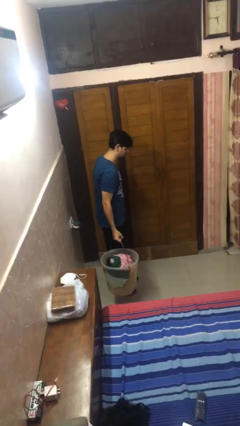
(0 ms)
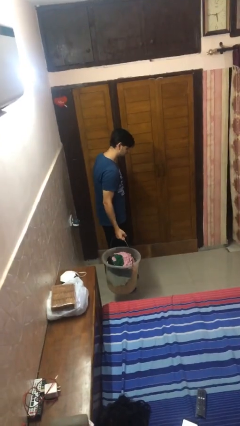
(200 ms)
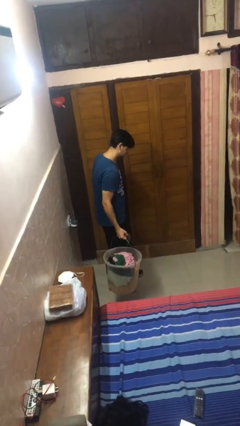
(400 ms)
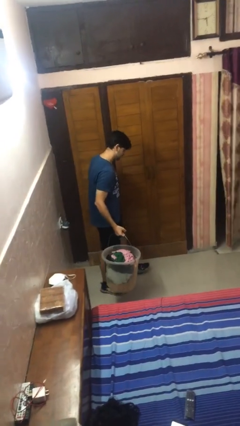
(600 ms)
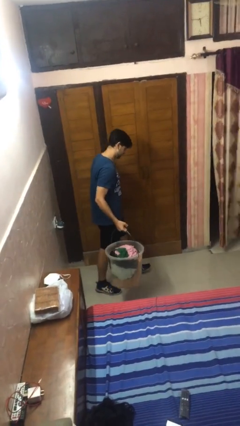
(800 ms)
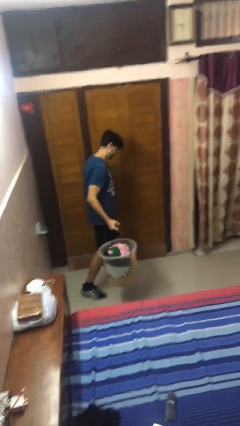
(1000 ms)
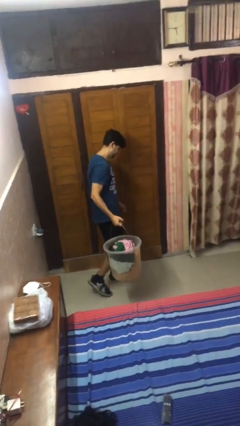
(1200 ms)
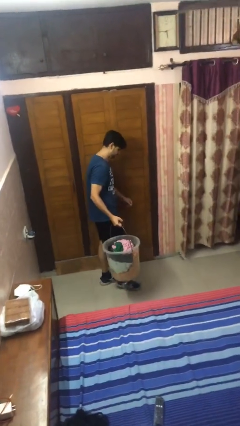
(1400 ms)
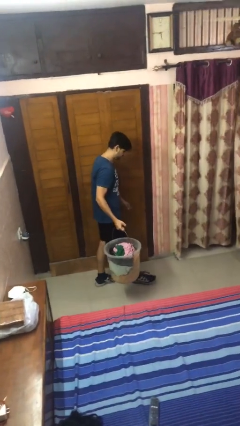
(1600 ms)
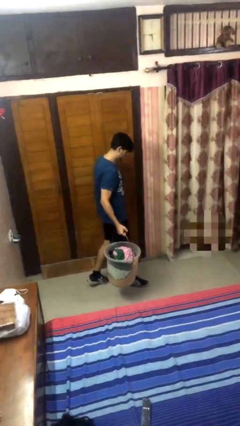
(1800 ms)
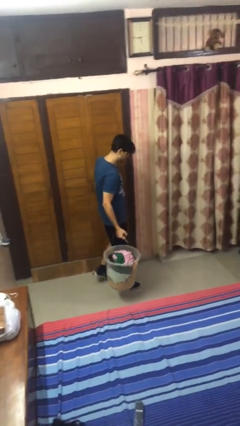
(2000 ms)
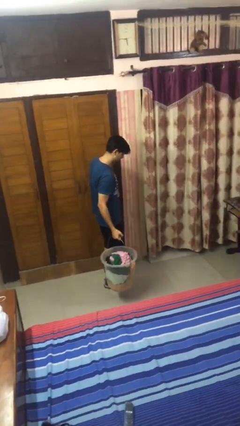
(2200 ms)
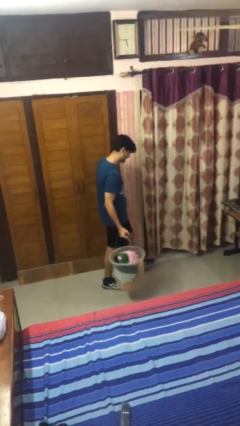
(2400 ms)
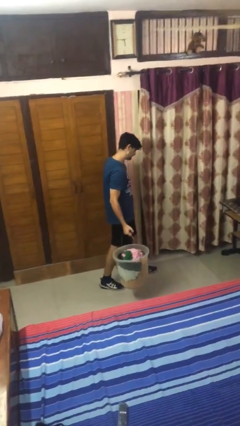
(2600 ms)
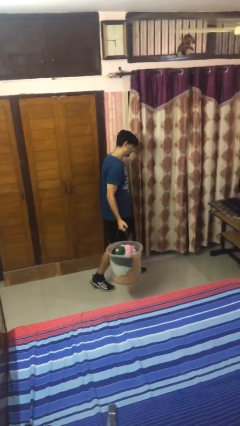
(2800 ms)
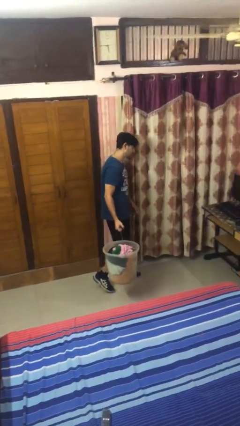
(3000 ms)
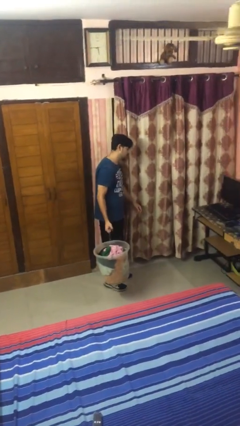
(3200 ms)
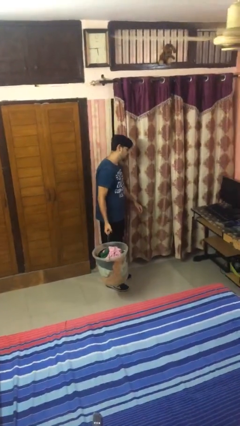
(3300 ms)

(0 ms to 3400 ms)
person carries laundry basket

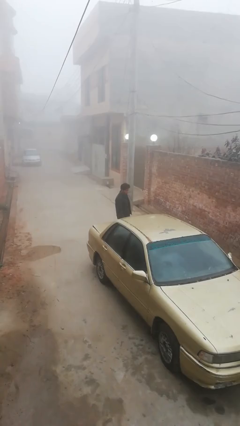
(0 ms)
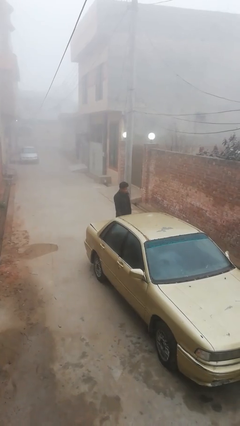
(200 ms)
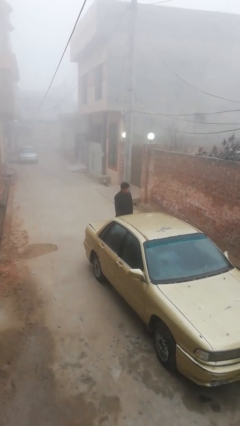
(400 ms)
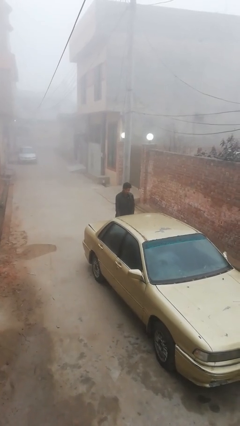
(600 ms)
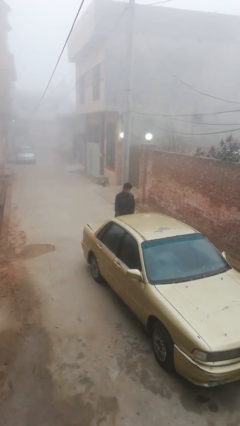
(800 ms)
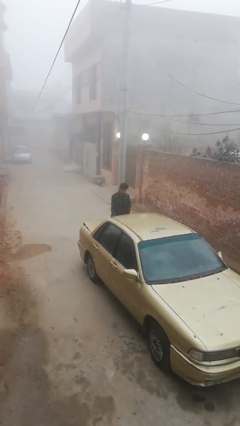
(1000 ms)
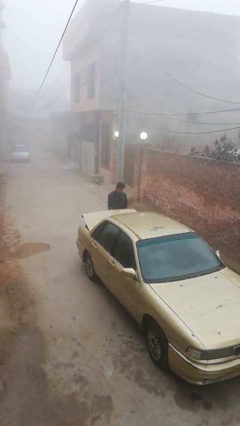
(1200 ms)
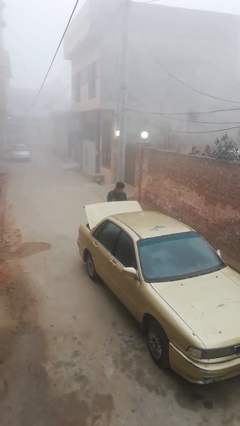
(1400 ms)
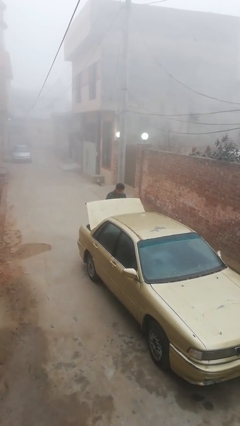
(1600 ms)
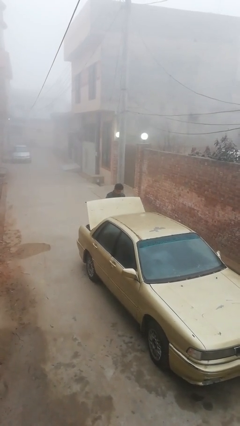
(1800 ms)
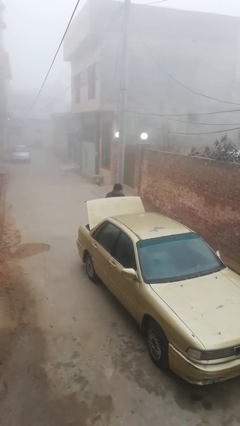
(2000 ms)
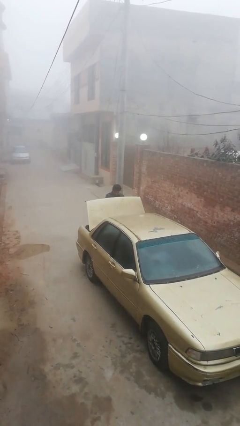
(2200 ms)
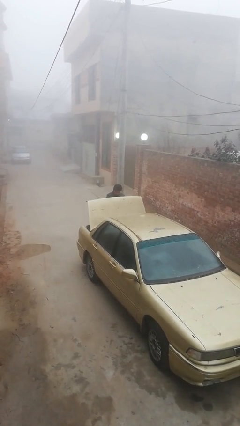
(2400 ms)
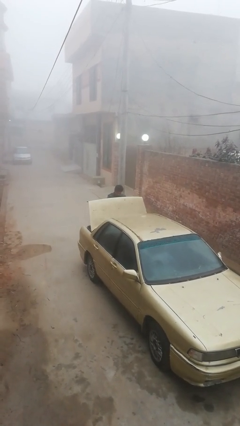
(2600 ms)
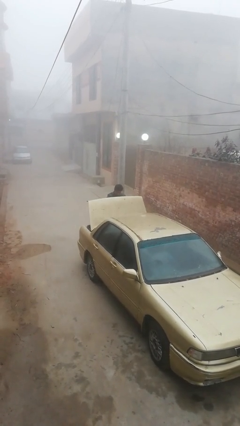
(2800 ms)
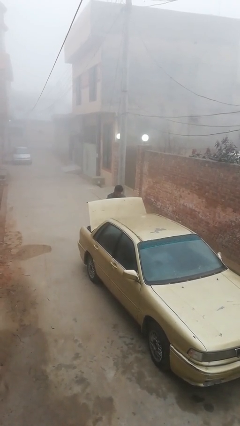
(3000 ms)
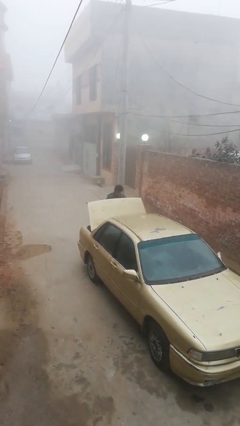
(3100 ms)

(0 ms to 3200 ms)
person opens car trunk

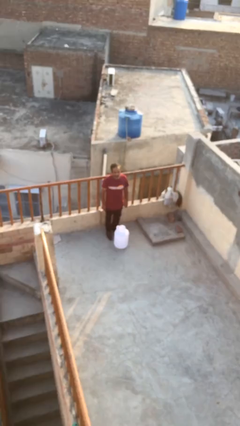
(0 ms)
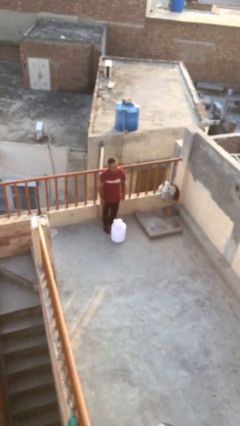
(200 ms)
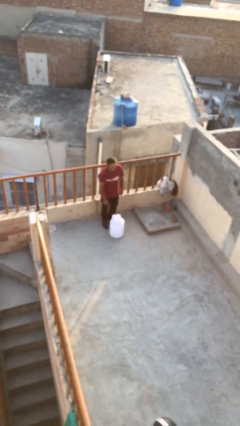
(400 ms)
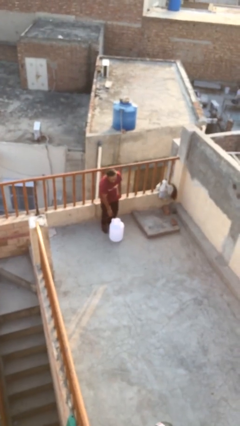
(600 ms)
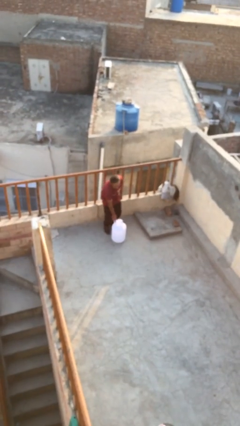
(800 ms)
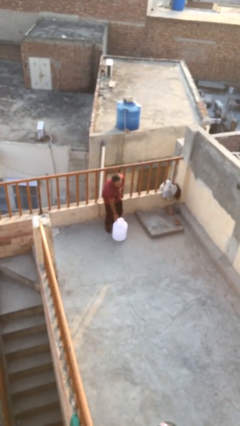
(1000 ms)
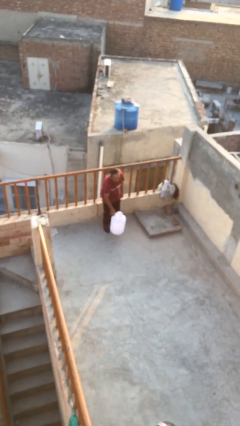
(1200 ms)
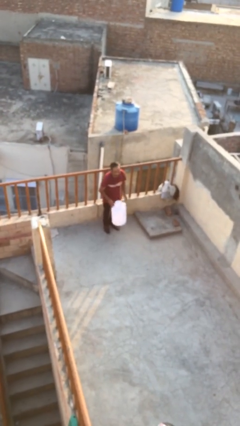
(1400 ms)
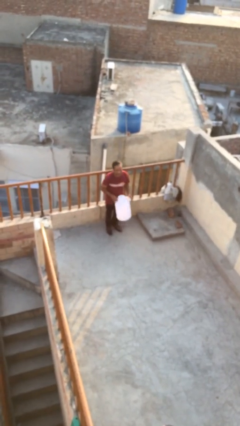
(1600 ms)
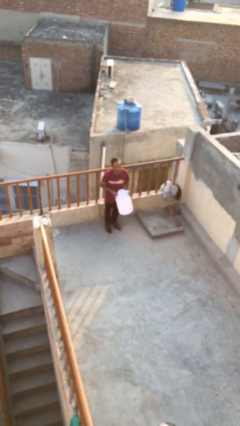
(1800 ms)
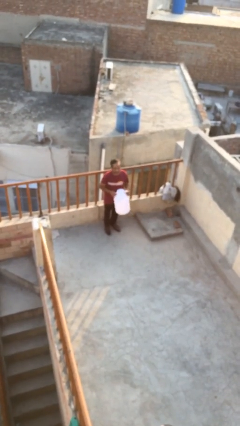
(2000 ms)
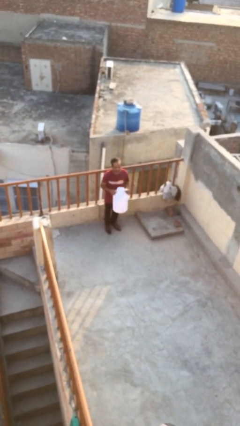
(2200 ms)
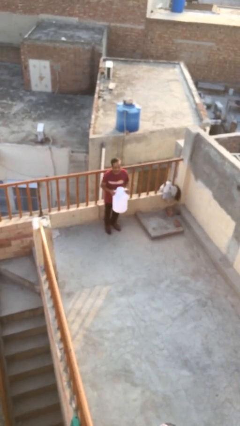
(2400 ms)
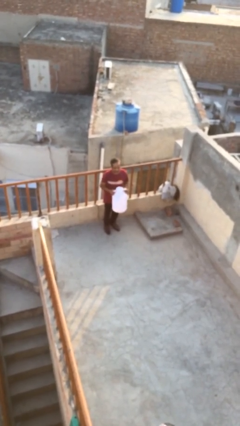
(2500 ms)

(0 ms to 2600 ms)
person picks up object from floor

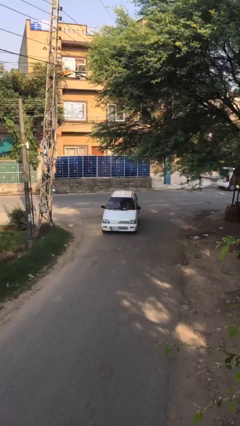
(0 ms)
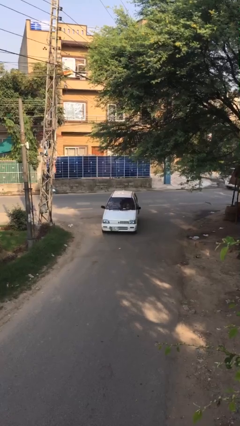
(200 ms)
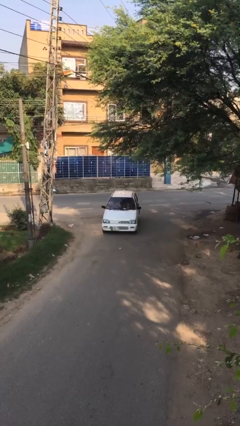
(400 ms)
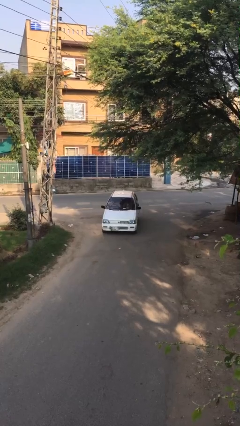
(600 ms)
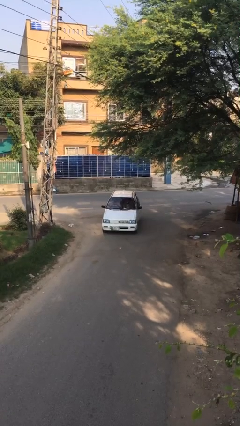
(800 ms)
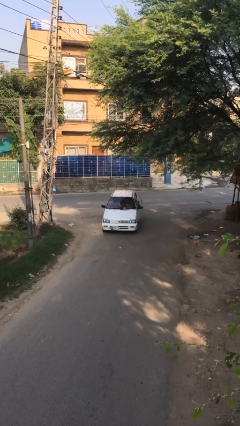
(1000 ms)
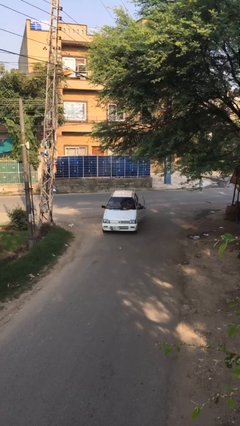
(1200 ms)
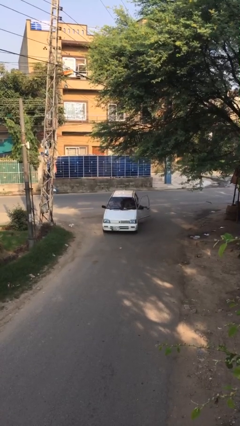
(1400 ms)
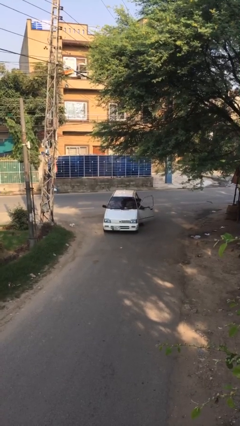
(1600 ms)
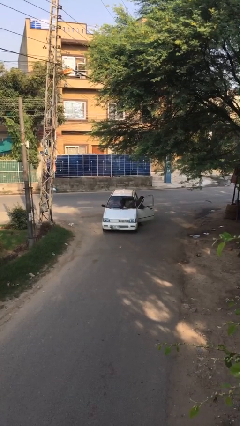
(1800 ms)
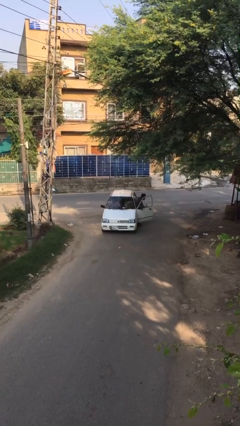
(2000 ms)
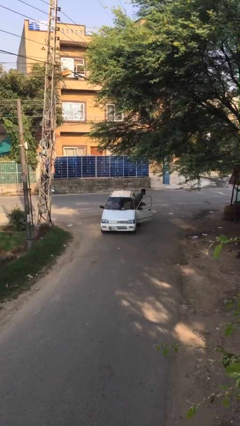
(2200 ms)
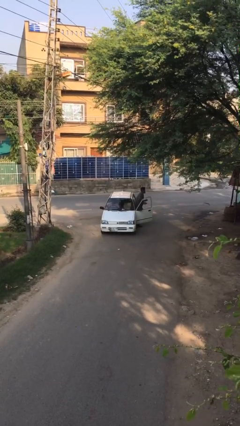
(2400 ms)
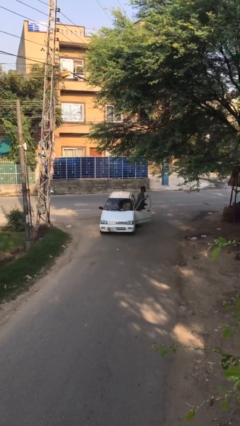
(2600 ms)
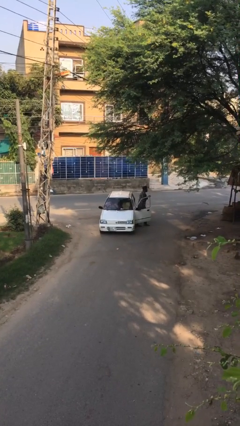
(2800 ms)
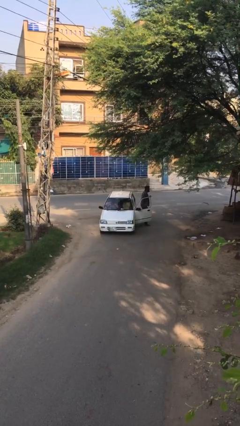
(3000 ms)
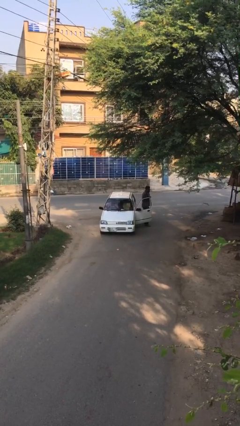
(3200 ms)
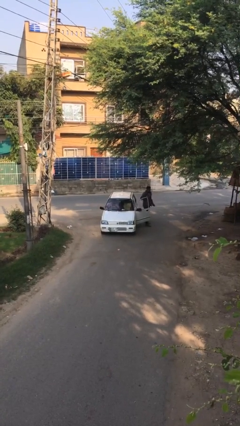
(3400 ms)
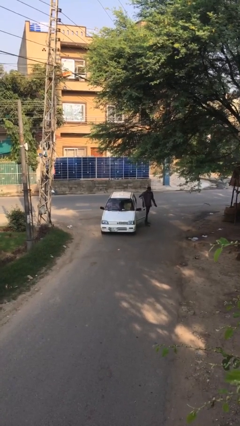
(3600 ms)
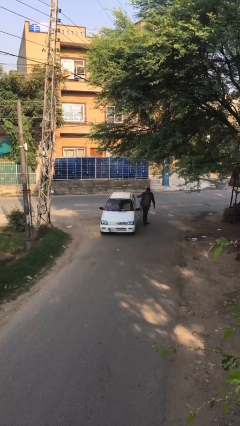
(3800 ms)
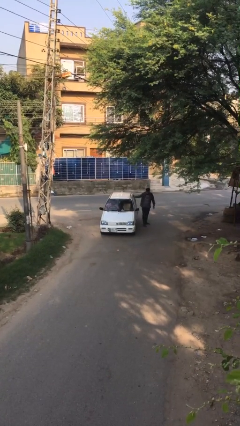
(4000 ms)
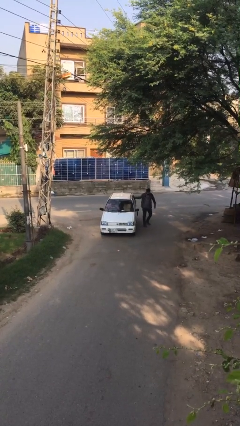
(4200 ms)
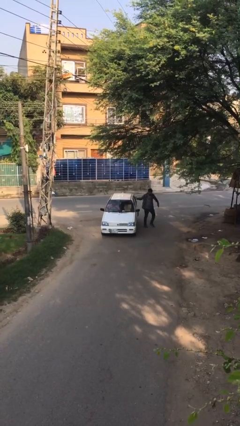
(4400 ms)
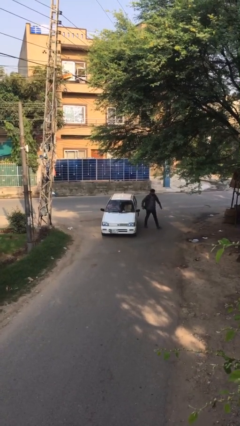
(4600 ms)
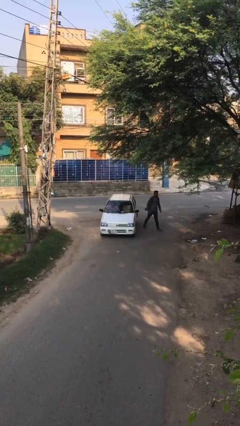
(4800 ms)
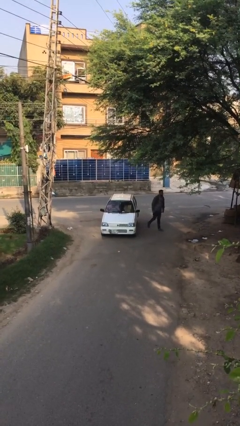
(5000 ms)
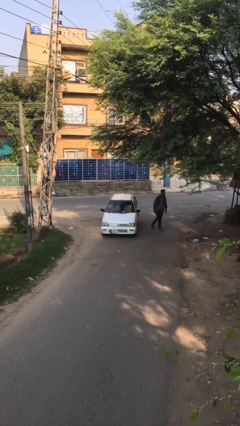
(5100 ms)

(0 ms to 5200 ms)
car drops off person

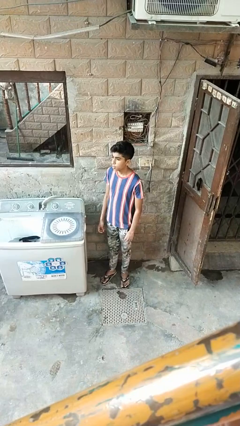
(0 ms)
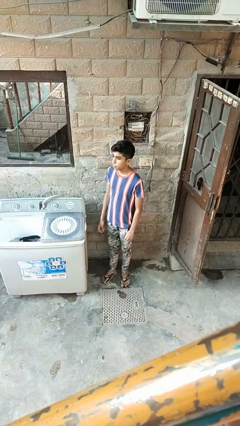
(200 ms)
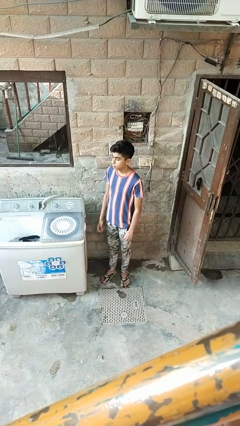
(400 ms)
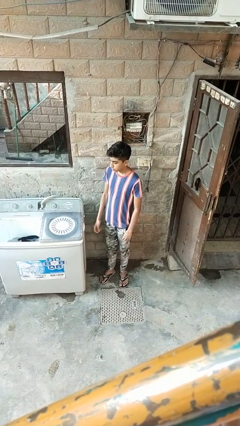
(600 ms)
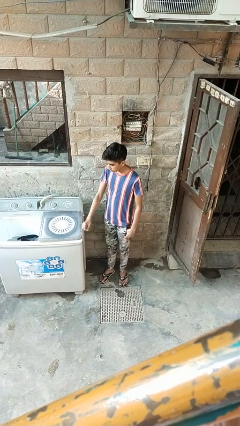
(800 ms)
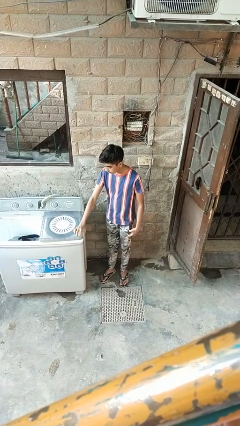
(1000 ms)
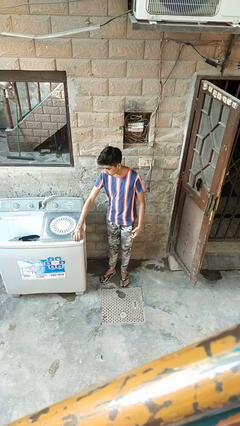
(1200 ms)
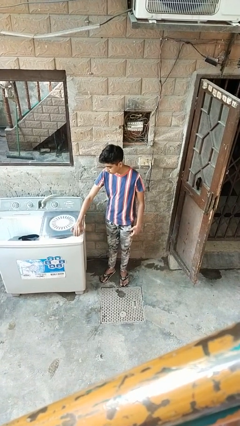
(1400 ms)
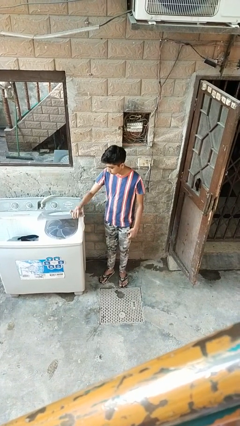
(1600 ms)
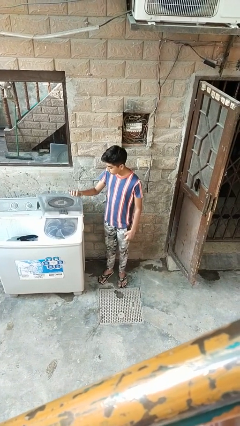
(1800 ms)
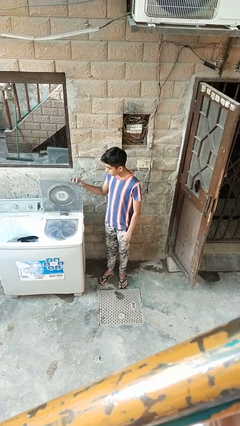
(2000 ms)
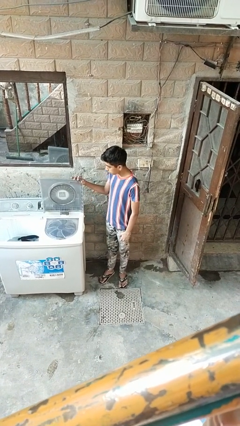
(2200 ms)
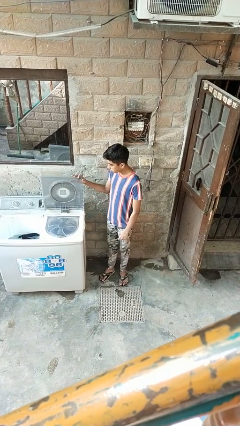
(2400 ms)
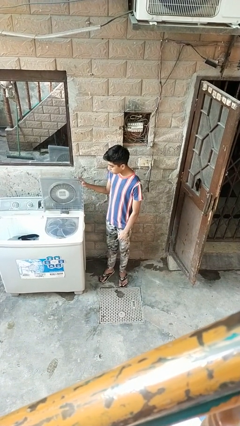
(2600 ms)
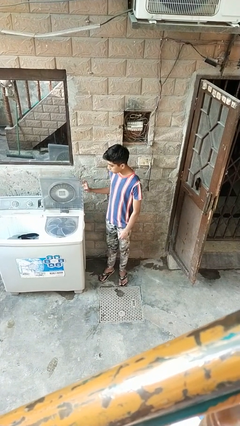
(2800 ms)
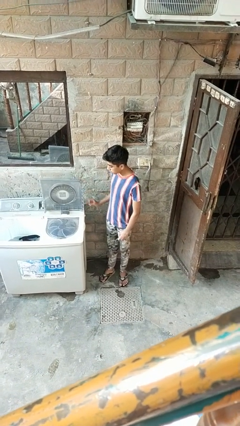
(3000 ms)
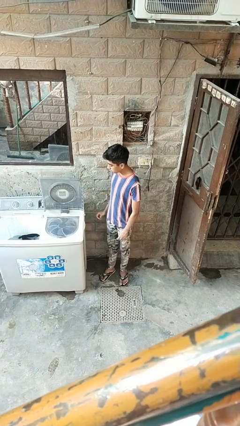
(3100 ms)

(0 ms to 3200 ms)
person opens clothes washer

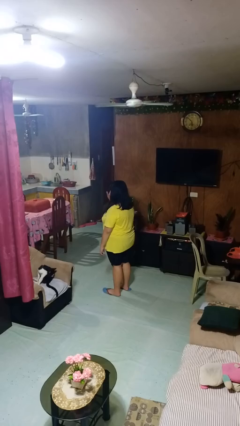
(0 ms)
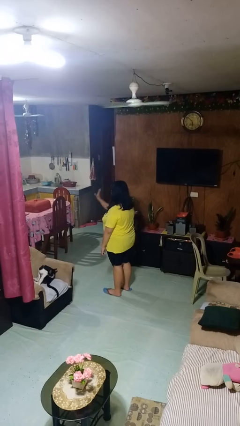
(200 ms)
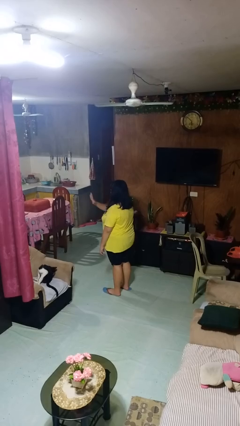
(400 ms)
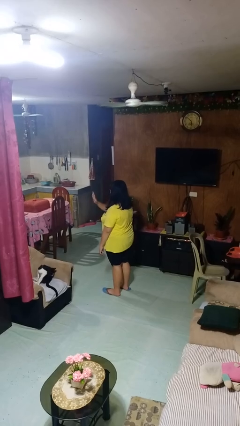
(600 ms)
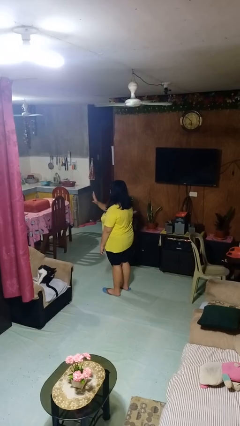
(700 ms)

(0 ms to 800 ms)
person gestures swipe left
